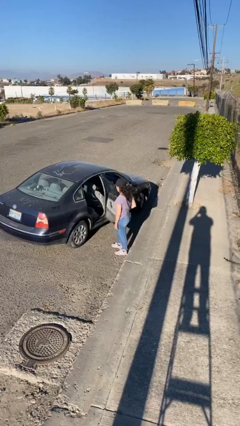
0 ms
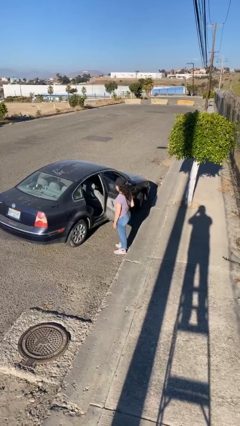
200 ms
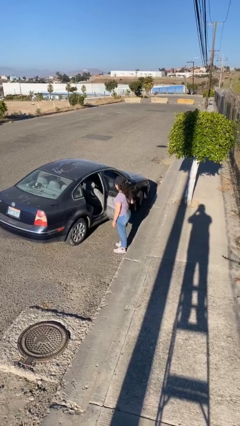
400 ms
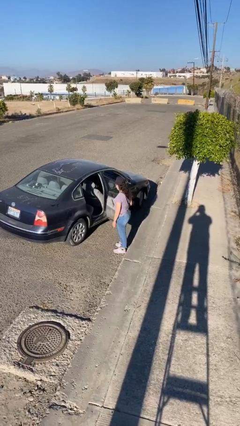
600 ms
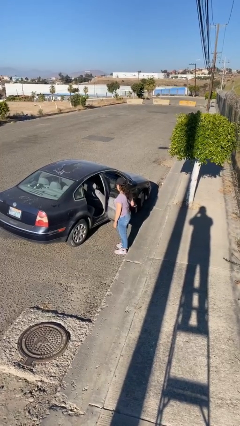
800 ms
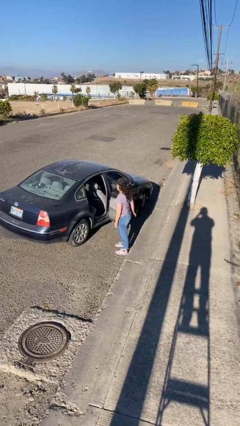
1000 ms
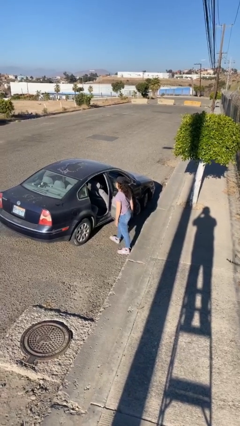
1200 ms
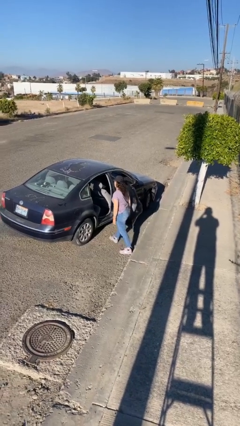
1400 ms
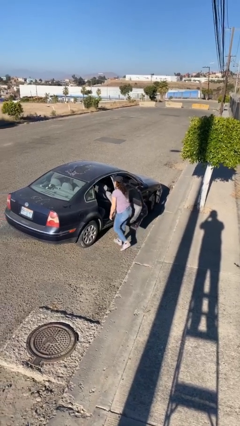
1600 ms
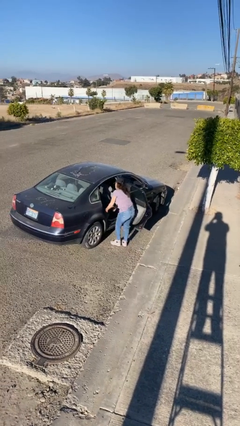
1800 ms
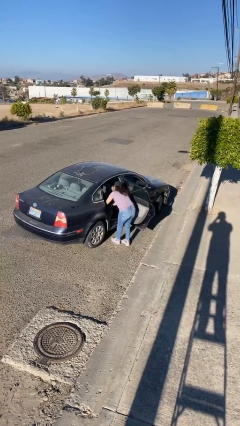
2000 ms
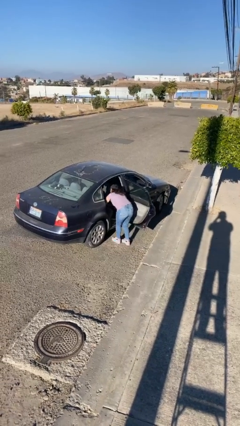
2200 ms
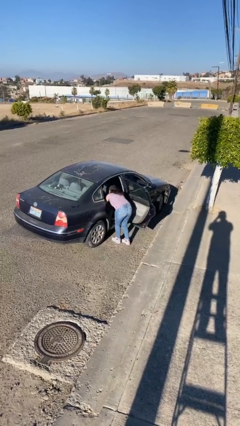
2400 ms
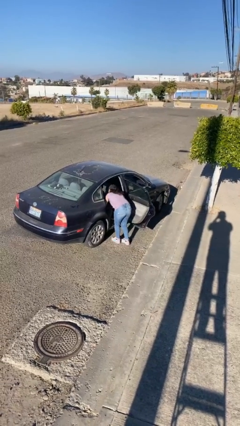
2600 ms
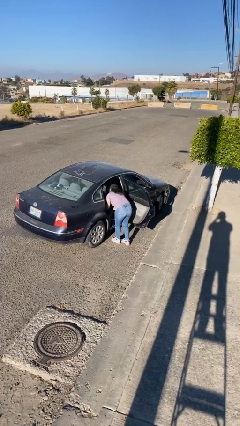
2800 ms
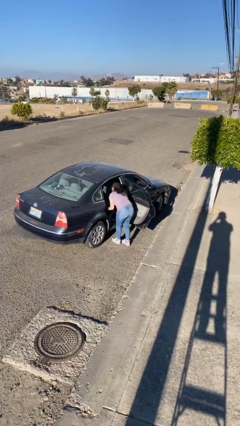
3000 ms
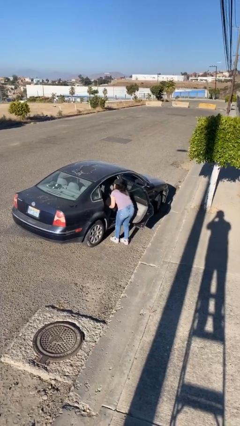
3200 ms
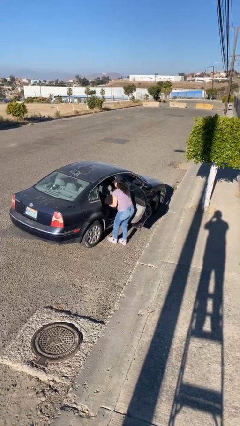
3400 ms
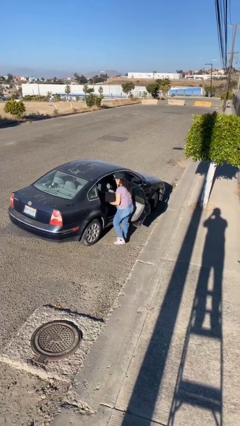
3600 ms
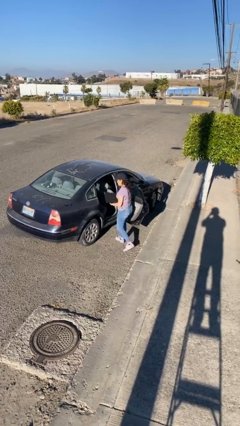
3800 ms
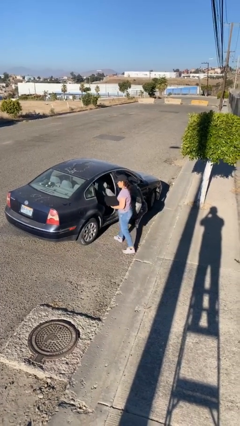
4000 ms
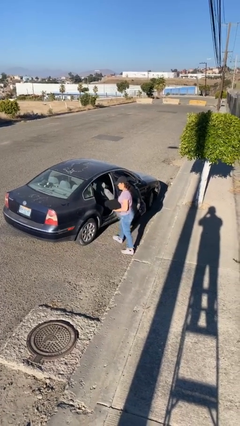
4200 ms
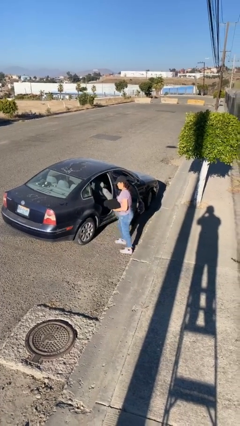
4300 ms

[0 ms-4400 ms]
person unloads car

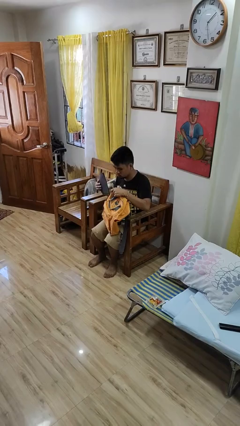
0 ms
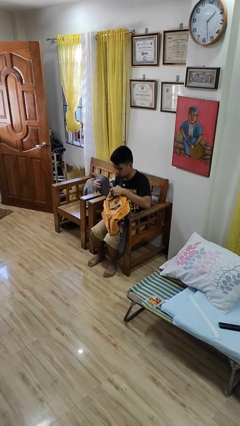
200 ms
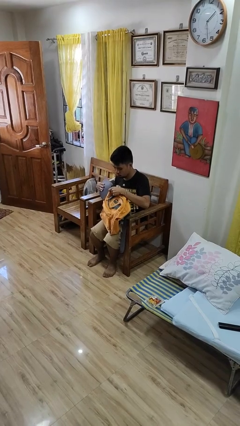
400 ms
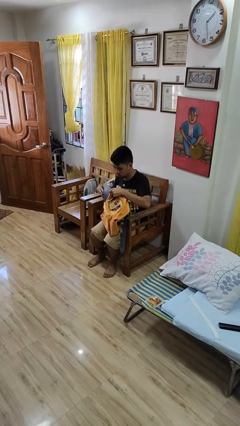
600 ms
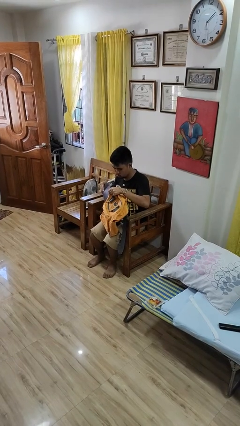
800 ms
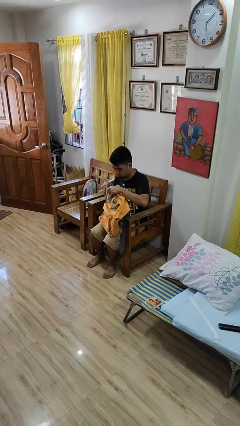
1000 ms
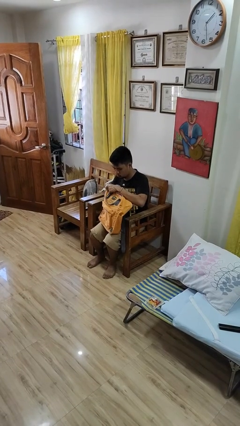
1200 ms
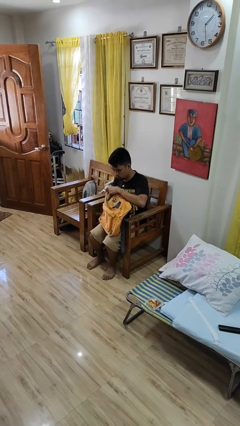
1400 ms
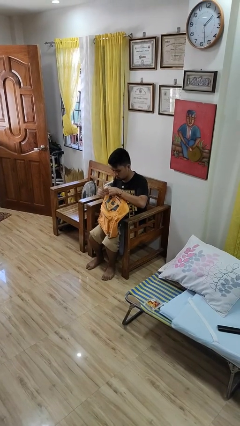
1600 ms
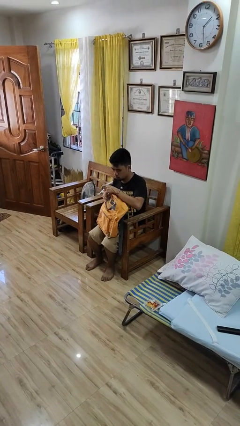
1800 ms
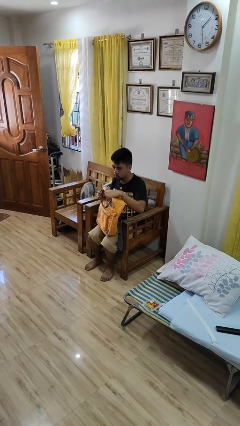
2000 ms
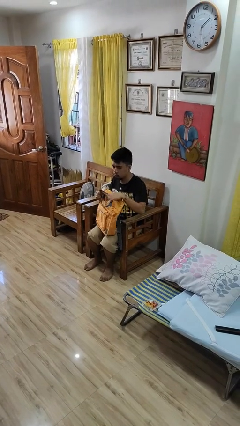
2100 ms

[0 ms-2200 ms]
person puts object into backpack

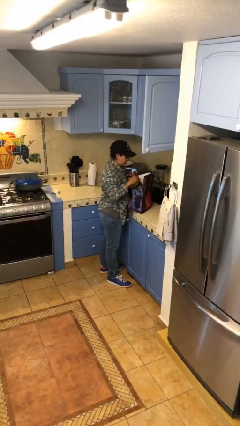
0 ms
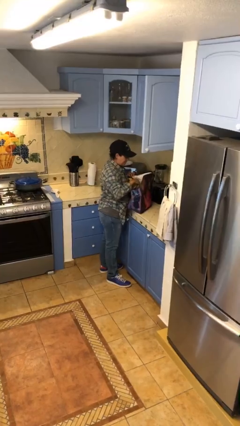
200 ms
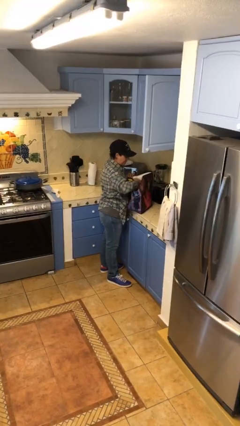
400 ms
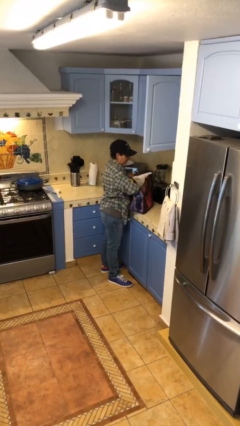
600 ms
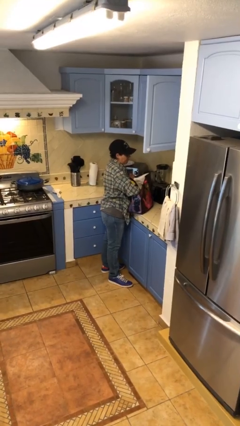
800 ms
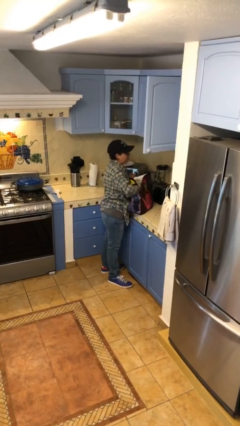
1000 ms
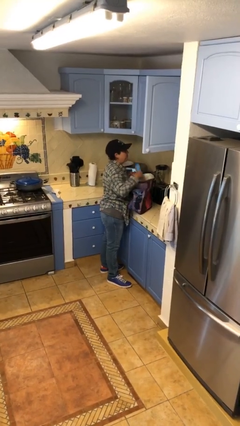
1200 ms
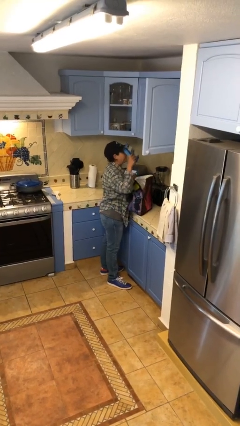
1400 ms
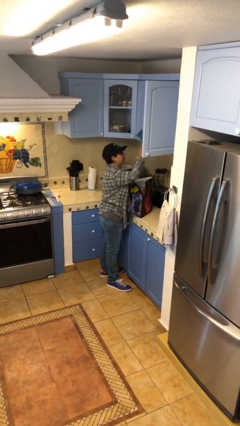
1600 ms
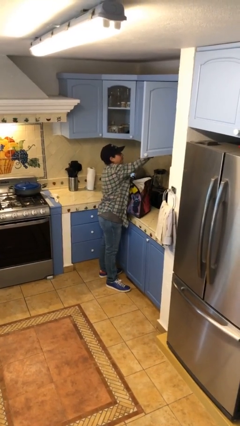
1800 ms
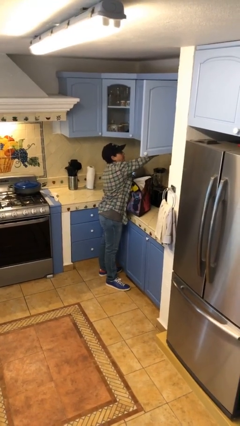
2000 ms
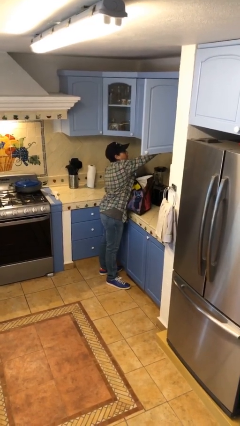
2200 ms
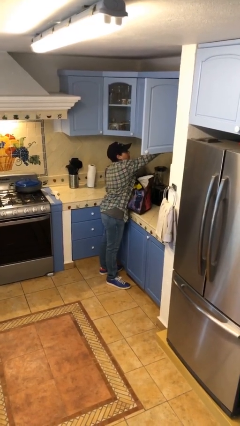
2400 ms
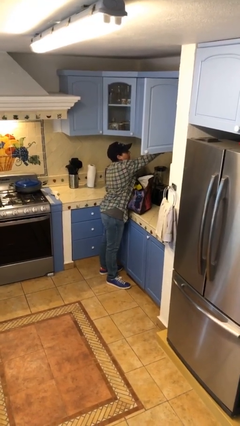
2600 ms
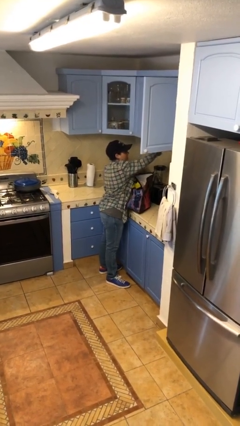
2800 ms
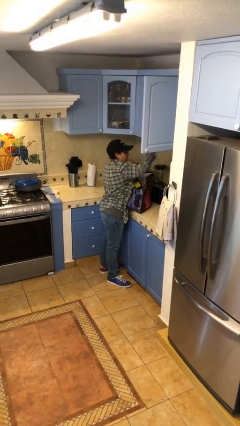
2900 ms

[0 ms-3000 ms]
person loads groceries into cabinet

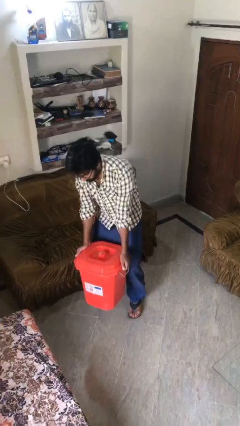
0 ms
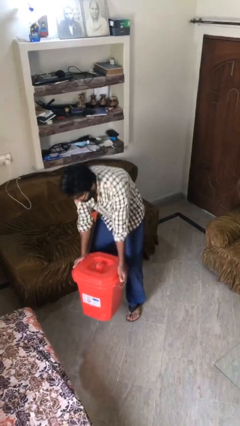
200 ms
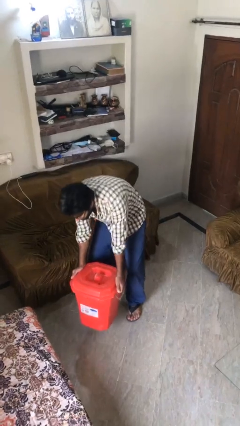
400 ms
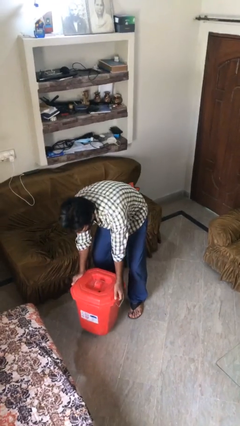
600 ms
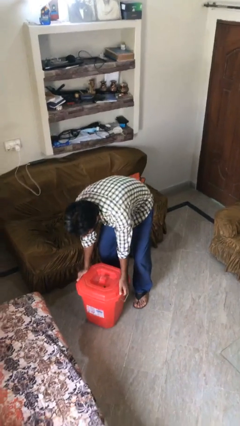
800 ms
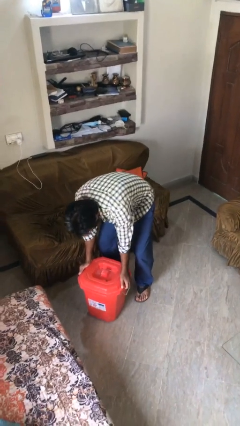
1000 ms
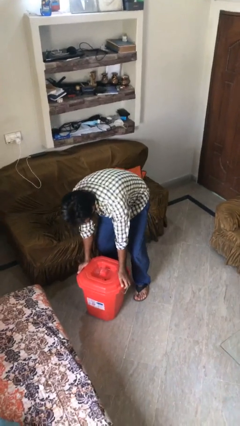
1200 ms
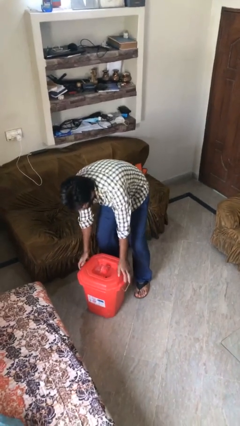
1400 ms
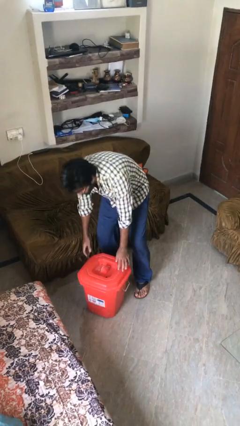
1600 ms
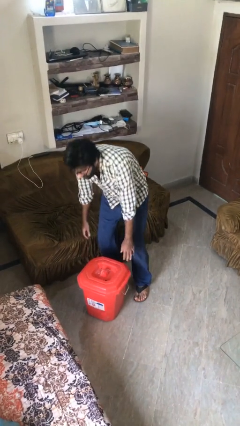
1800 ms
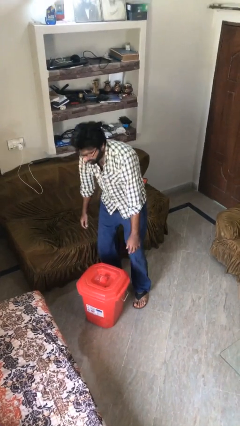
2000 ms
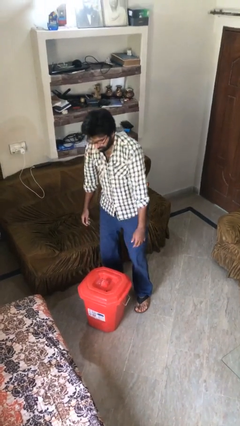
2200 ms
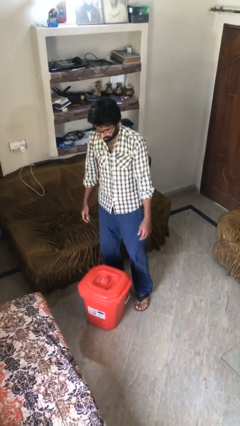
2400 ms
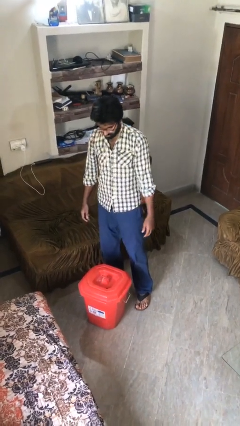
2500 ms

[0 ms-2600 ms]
person puts down object on floor

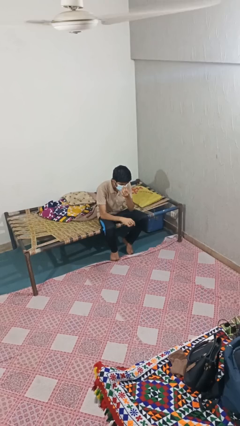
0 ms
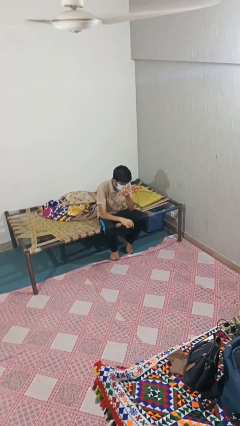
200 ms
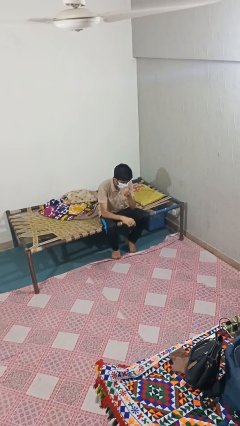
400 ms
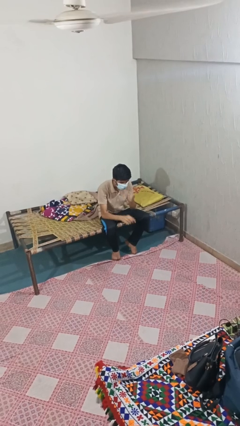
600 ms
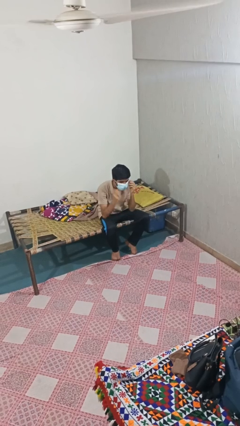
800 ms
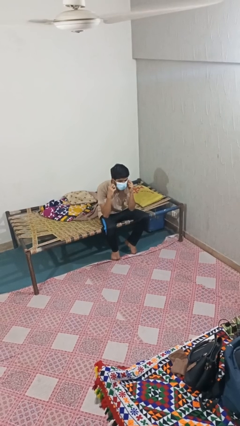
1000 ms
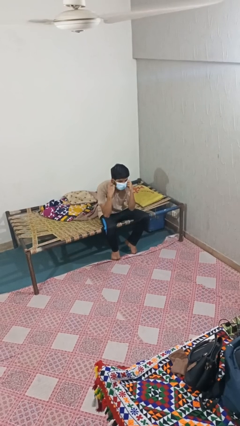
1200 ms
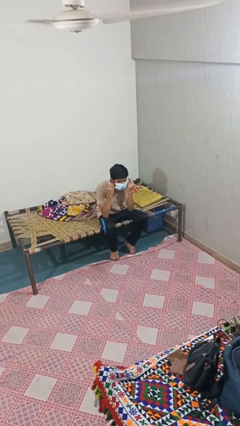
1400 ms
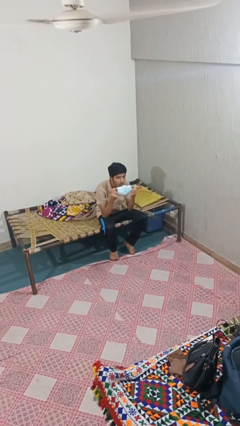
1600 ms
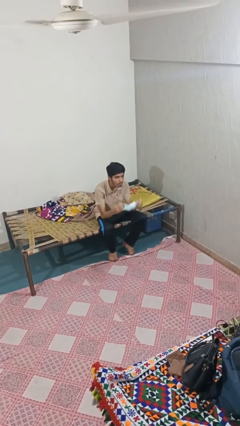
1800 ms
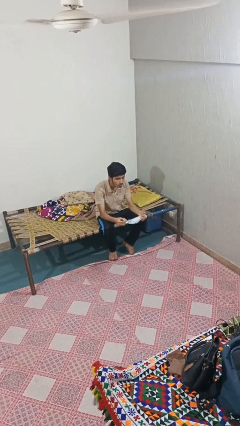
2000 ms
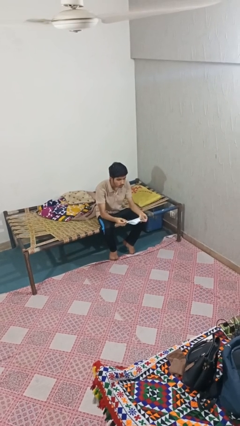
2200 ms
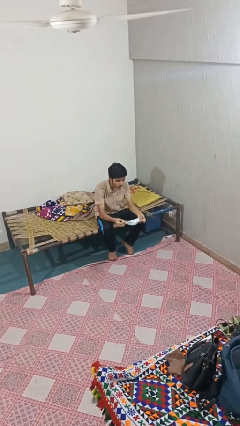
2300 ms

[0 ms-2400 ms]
person takes off facemask

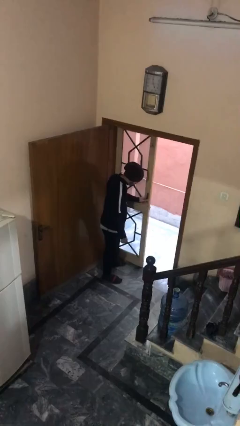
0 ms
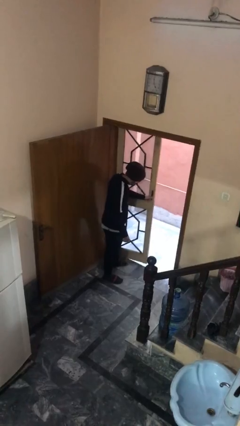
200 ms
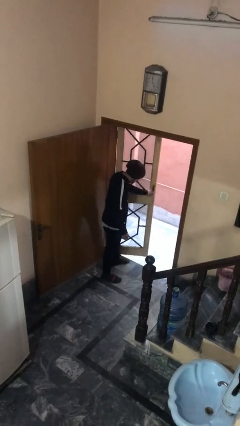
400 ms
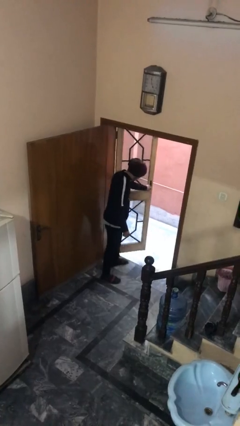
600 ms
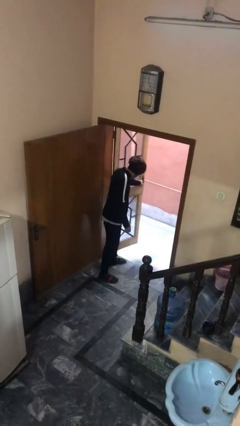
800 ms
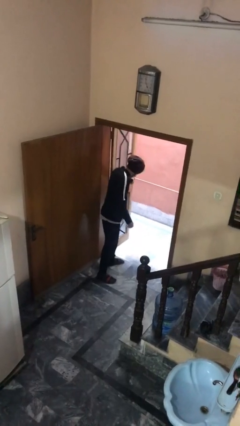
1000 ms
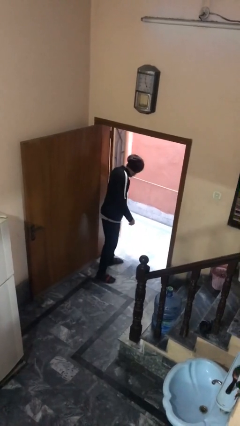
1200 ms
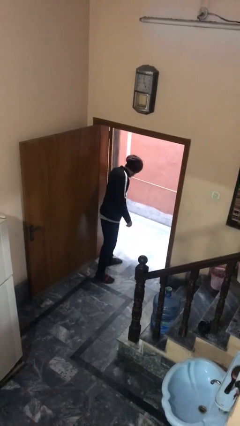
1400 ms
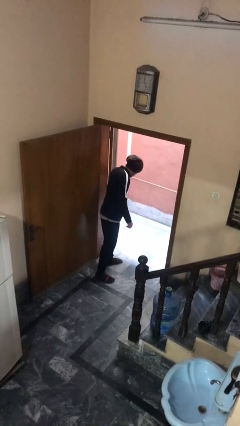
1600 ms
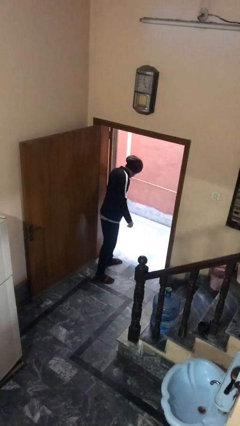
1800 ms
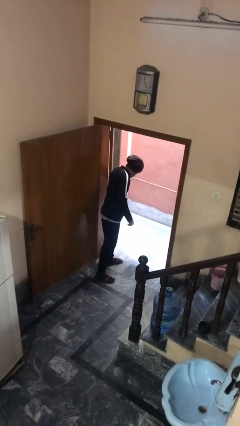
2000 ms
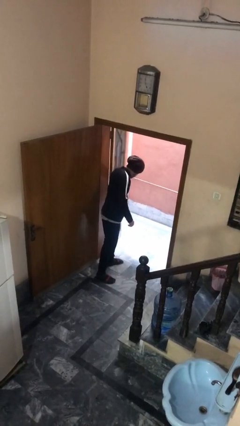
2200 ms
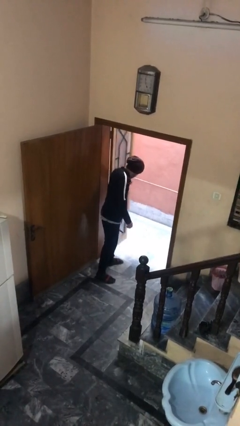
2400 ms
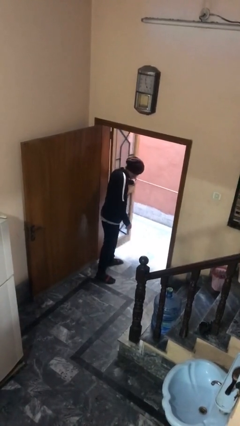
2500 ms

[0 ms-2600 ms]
person opens facility door
